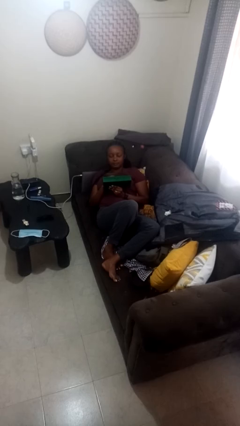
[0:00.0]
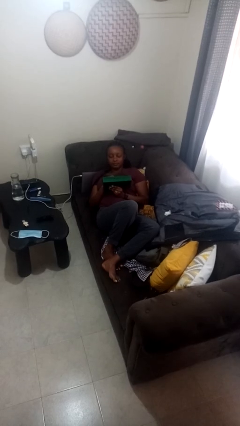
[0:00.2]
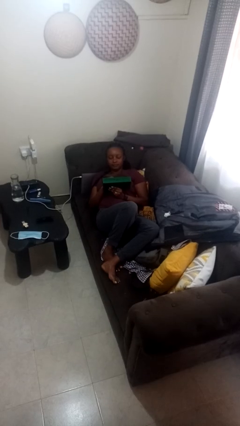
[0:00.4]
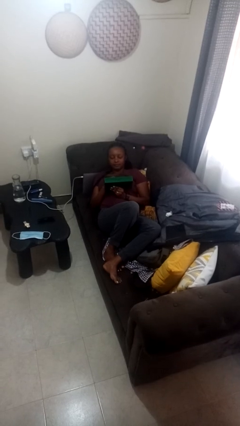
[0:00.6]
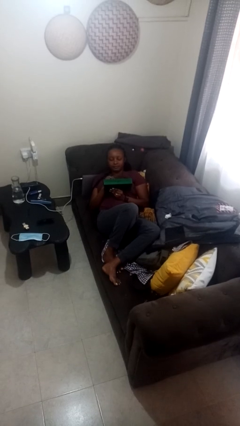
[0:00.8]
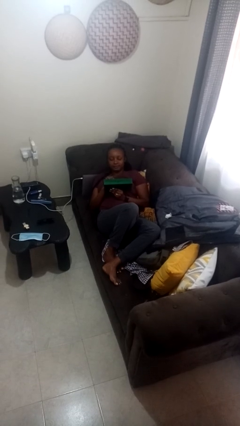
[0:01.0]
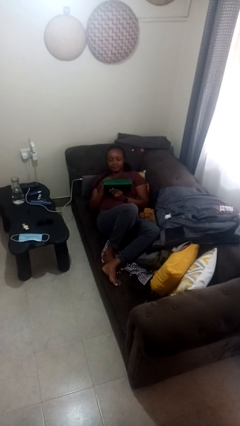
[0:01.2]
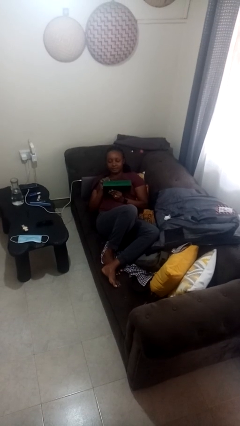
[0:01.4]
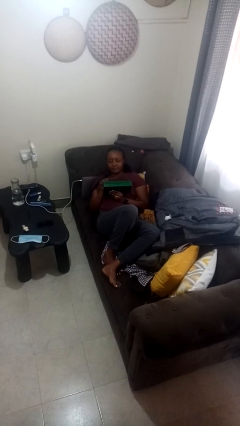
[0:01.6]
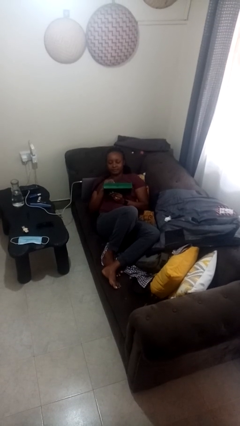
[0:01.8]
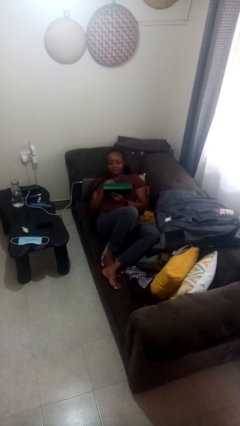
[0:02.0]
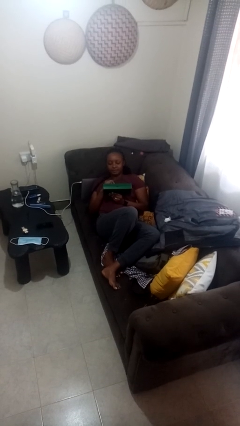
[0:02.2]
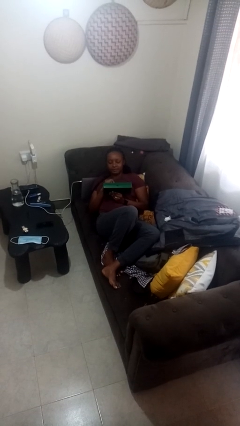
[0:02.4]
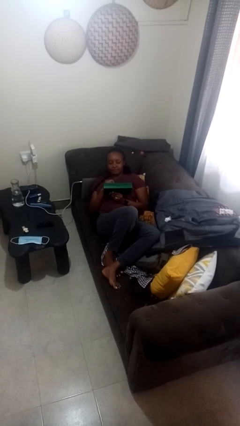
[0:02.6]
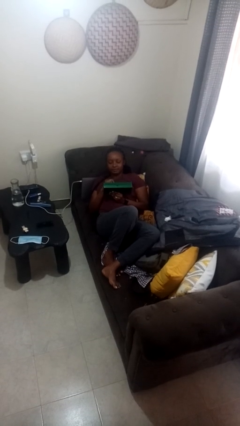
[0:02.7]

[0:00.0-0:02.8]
person interacts with handheld game

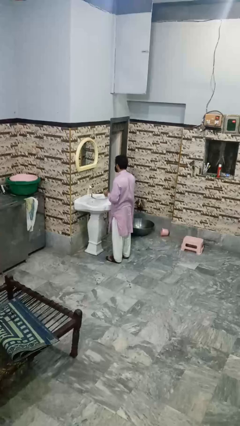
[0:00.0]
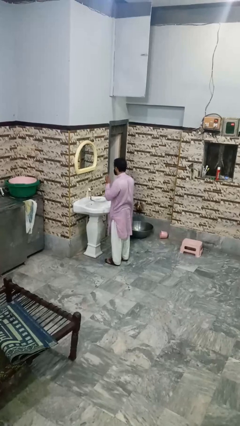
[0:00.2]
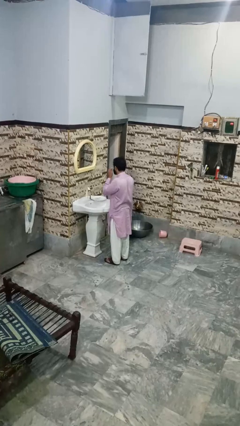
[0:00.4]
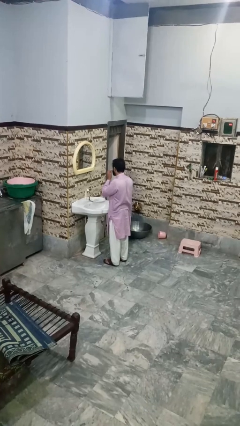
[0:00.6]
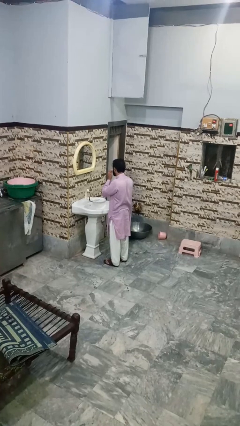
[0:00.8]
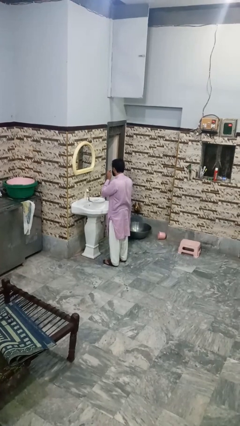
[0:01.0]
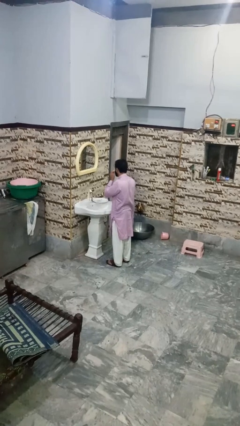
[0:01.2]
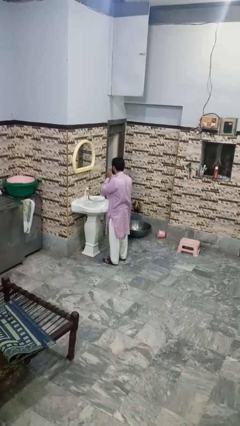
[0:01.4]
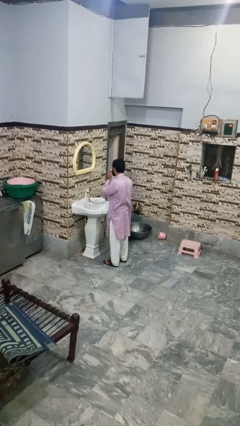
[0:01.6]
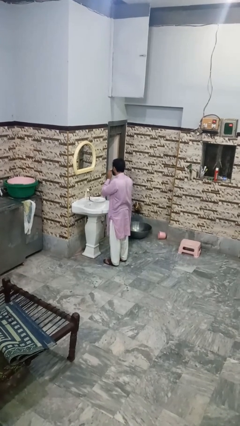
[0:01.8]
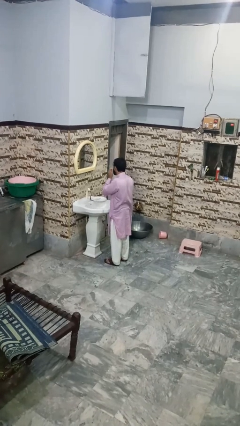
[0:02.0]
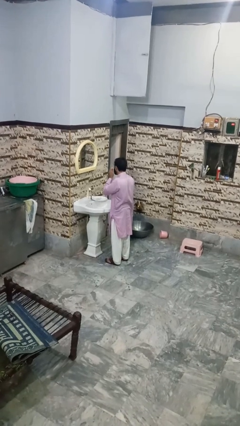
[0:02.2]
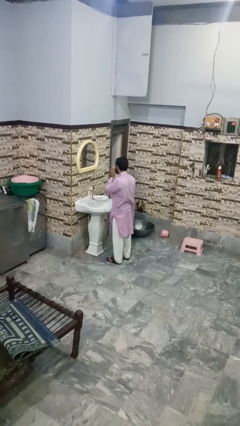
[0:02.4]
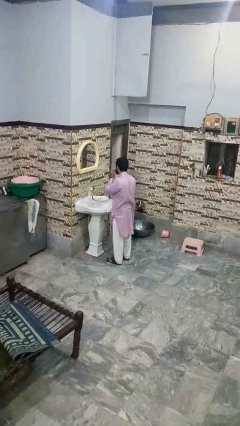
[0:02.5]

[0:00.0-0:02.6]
person applies shaving cream

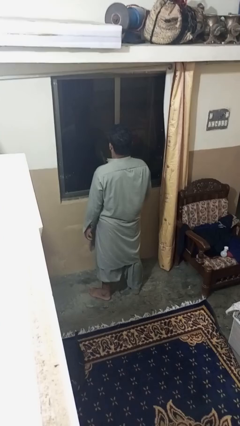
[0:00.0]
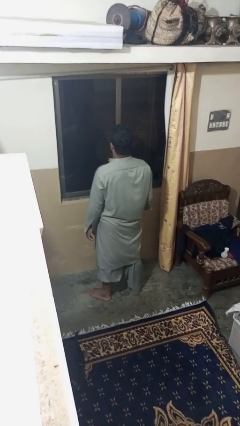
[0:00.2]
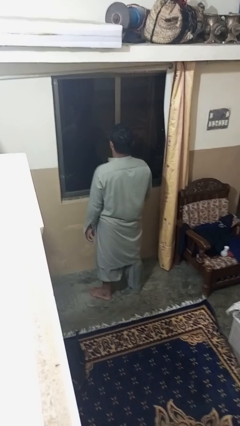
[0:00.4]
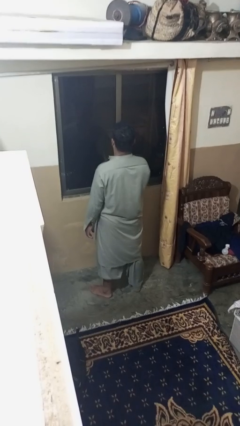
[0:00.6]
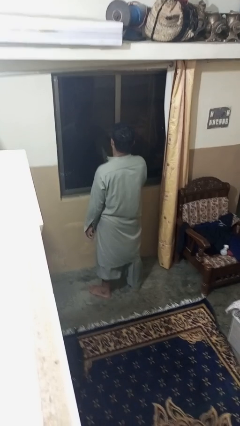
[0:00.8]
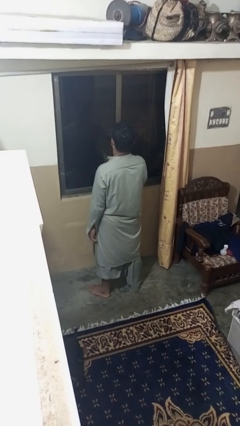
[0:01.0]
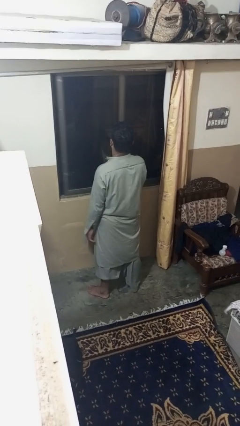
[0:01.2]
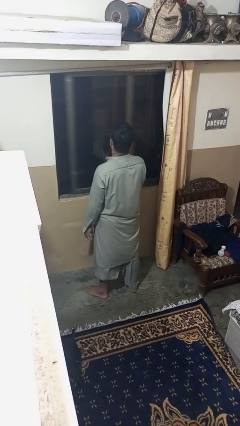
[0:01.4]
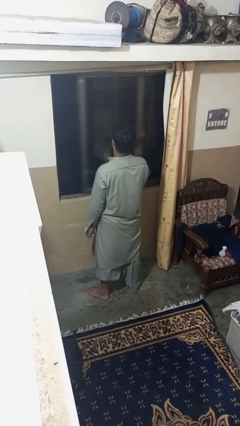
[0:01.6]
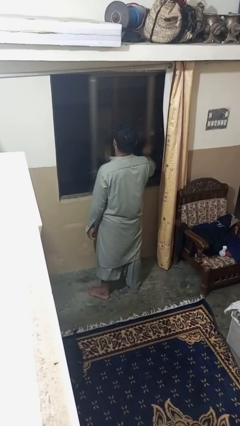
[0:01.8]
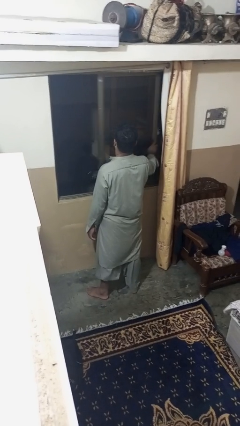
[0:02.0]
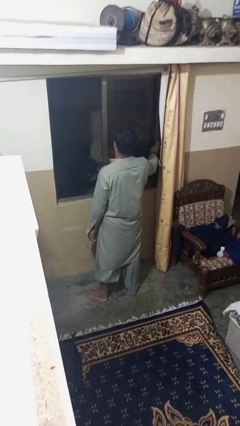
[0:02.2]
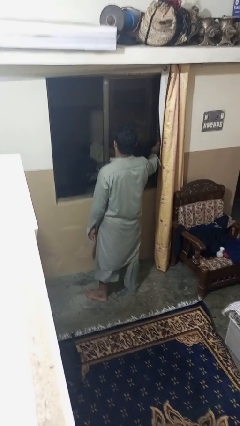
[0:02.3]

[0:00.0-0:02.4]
person opens home window

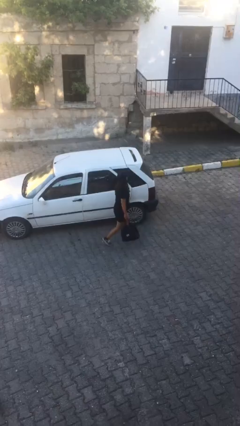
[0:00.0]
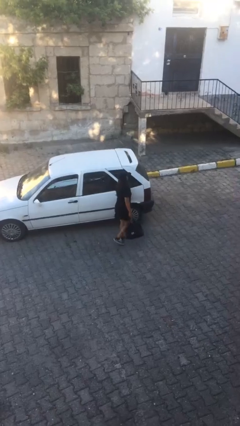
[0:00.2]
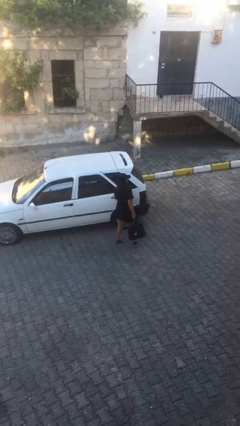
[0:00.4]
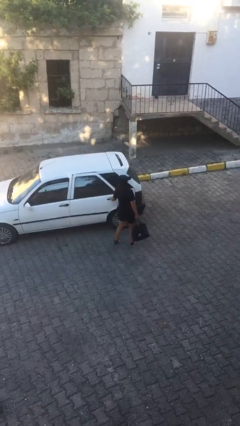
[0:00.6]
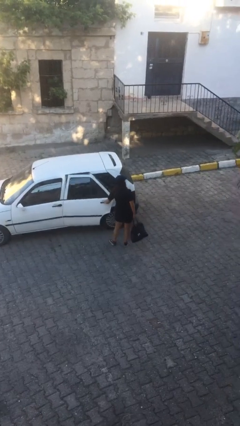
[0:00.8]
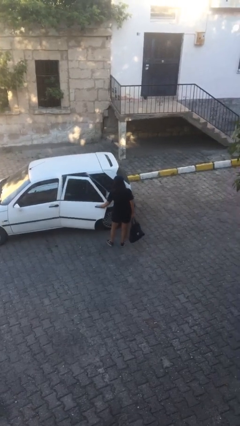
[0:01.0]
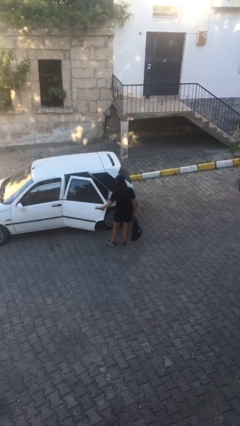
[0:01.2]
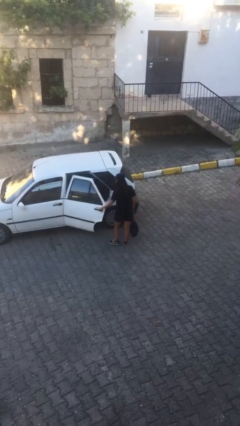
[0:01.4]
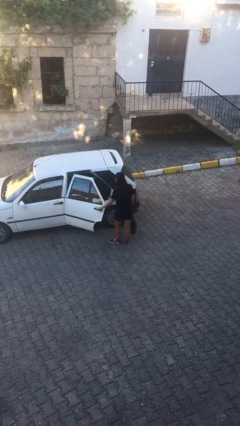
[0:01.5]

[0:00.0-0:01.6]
person opens car door

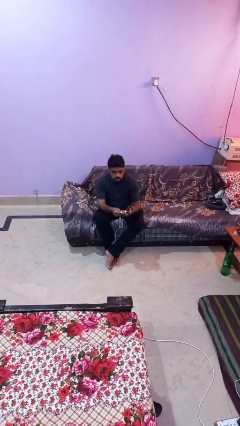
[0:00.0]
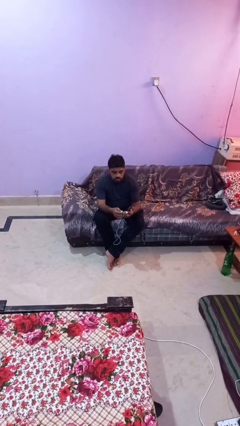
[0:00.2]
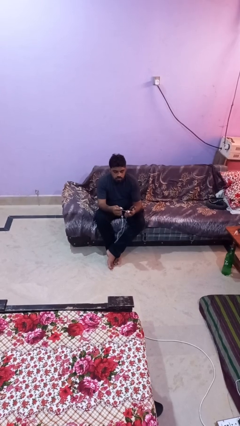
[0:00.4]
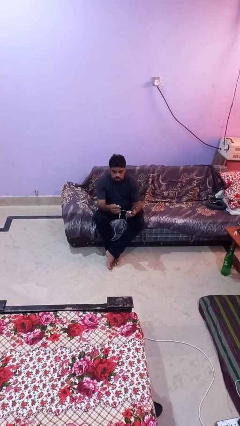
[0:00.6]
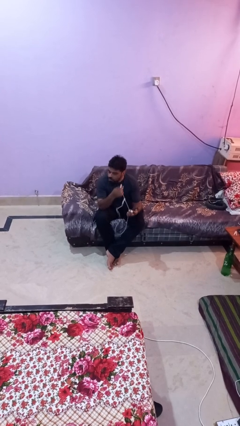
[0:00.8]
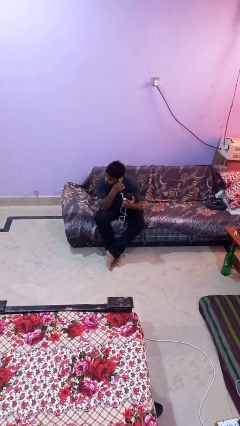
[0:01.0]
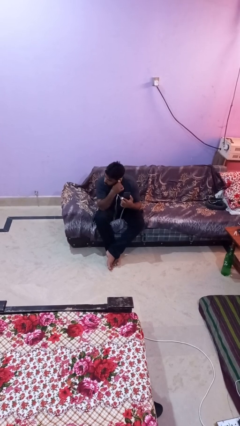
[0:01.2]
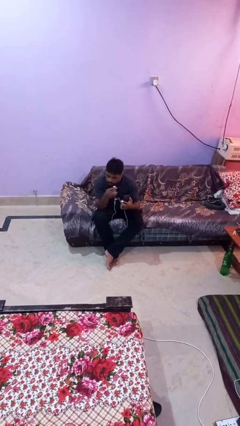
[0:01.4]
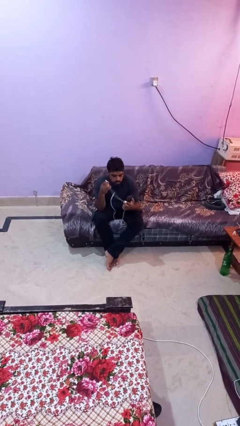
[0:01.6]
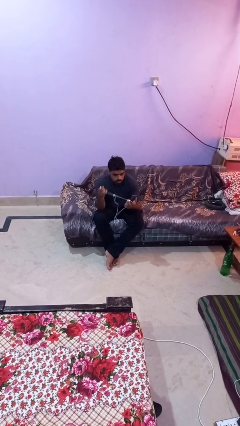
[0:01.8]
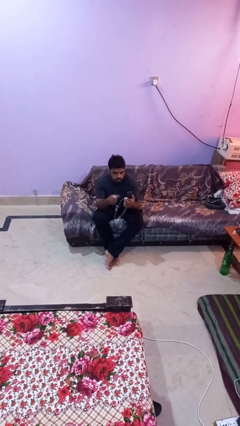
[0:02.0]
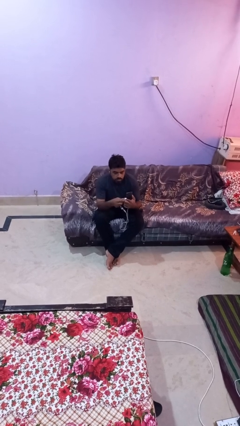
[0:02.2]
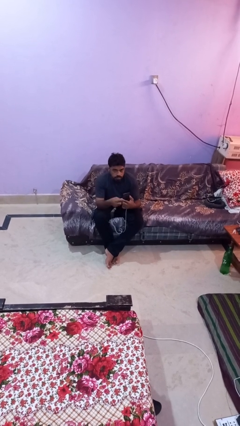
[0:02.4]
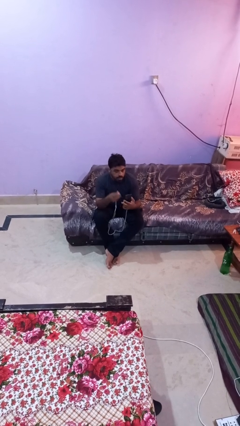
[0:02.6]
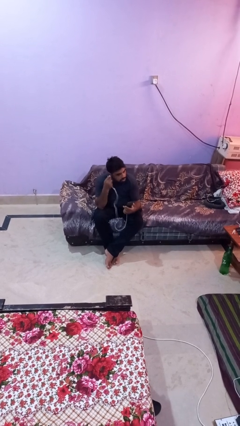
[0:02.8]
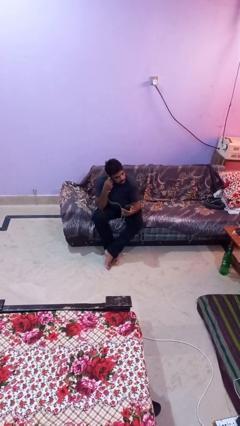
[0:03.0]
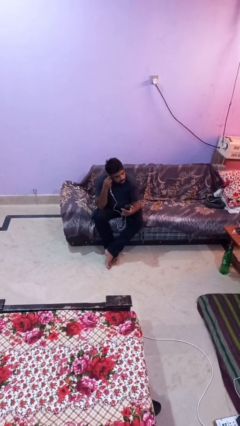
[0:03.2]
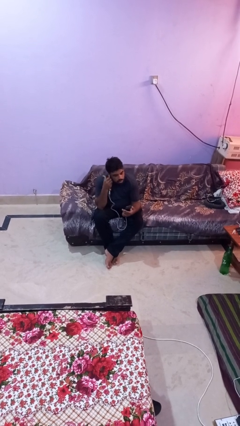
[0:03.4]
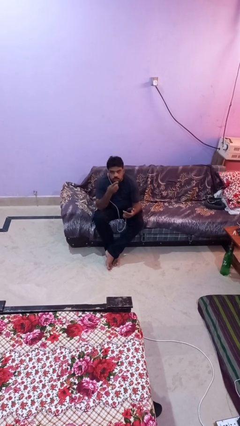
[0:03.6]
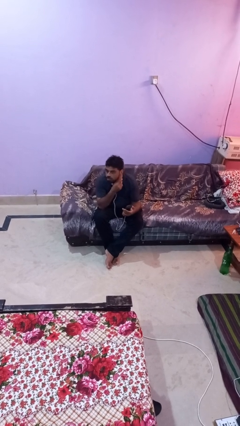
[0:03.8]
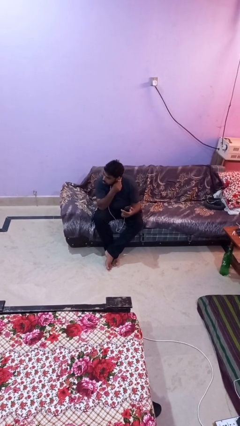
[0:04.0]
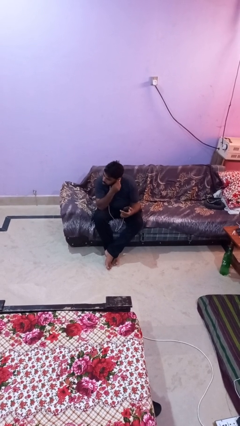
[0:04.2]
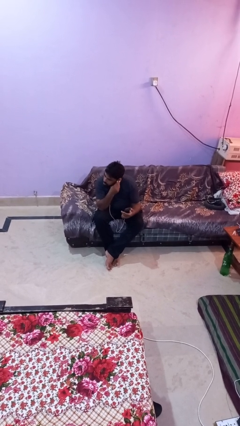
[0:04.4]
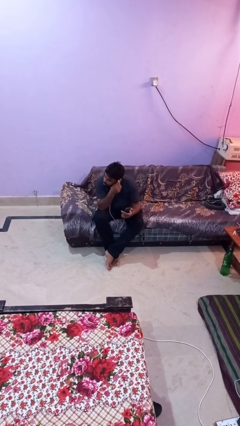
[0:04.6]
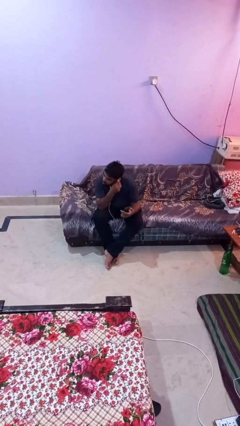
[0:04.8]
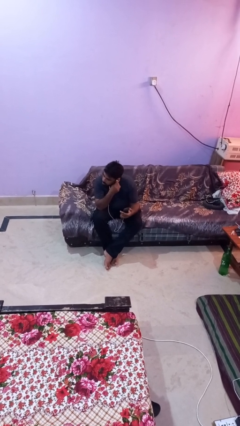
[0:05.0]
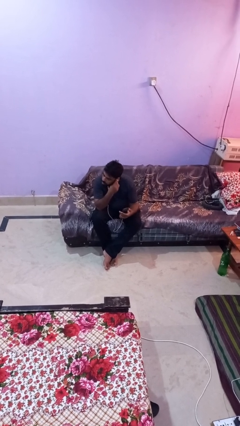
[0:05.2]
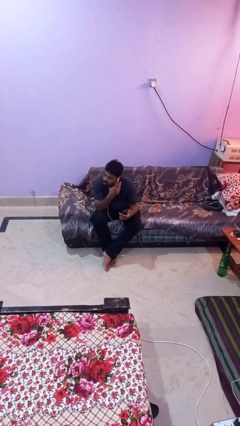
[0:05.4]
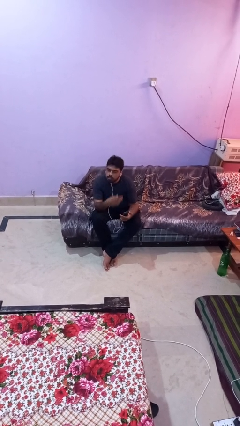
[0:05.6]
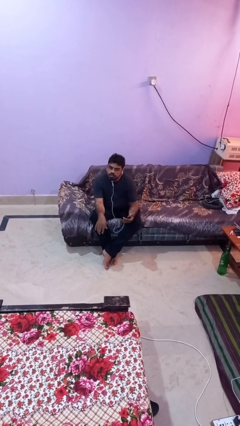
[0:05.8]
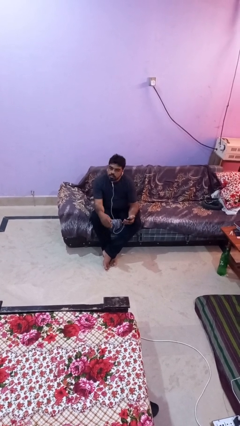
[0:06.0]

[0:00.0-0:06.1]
person puts on headphones

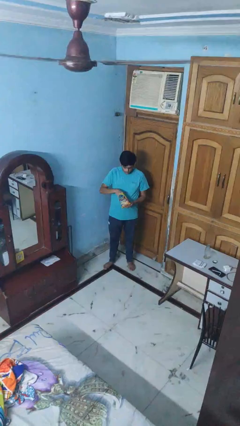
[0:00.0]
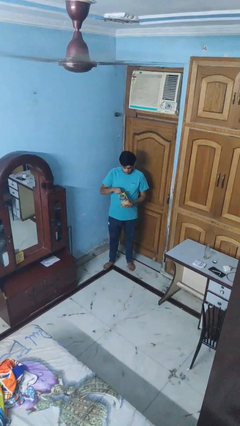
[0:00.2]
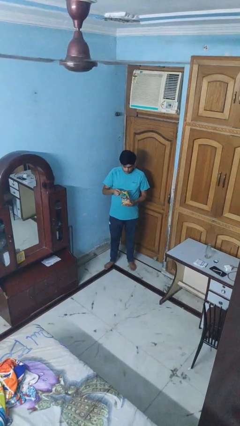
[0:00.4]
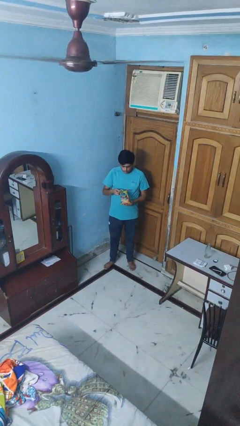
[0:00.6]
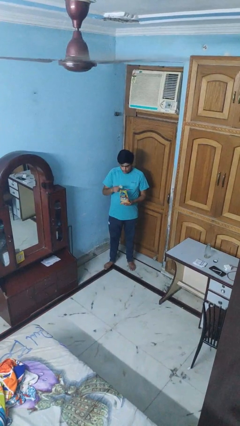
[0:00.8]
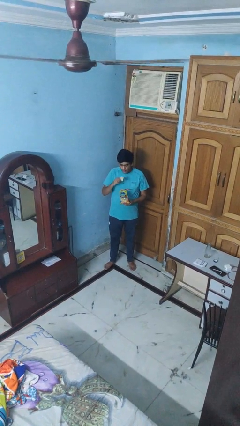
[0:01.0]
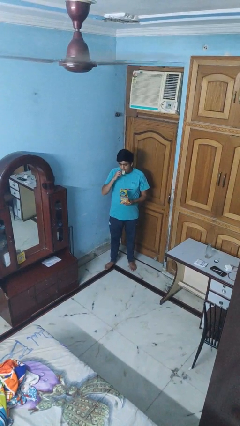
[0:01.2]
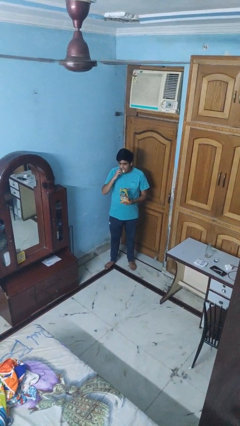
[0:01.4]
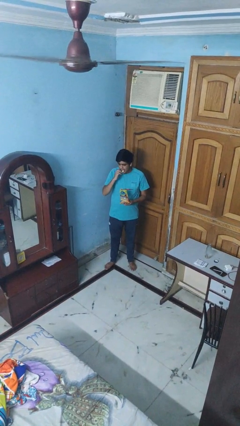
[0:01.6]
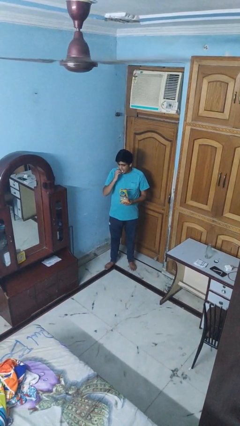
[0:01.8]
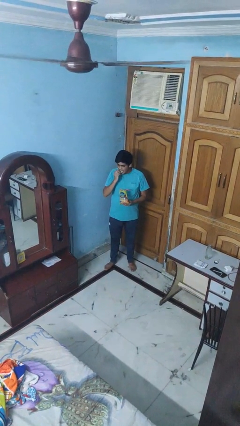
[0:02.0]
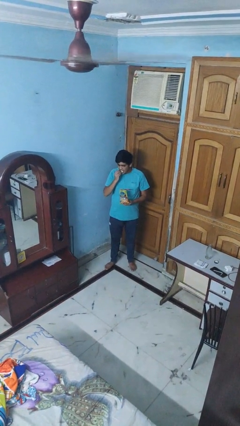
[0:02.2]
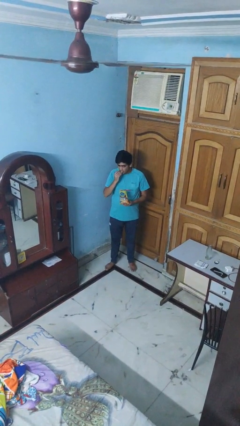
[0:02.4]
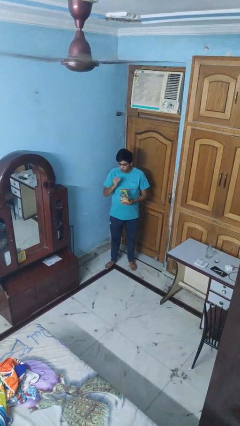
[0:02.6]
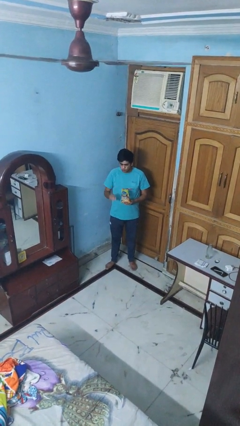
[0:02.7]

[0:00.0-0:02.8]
person eats snack from bag
